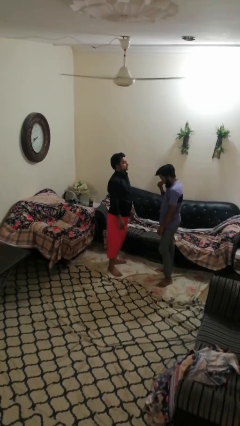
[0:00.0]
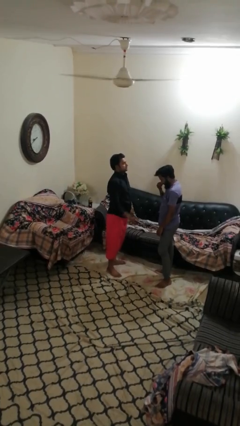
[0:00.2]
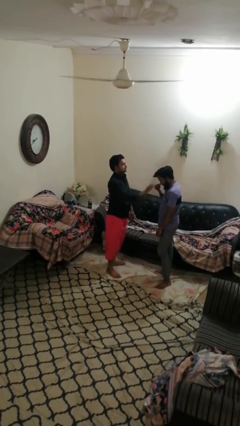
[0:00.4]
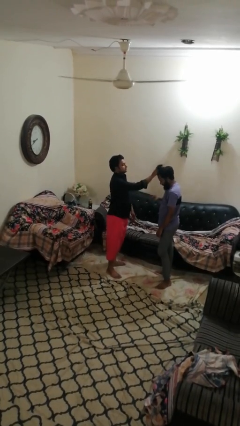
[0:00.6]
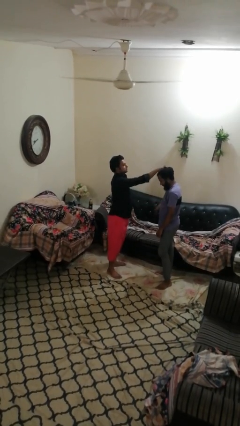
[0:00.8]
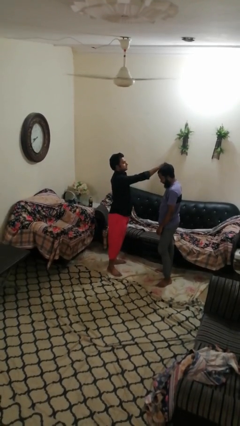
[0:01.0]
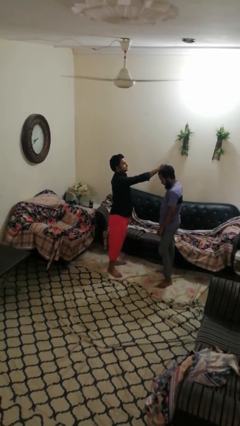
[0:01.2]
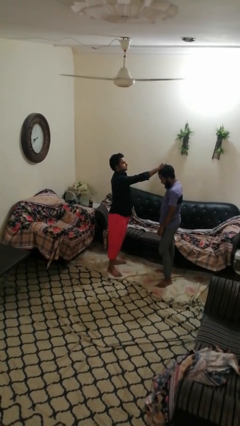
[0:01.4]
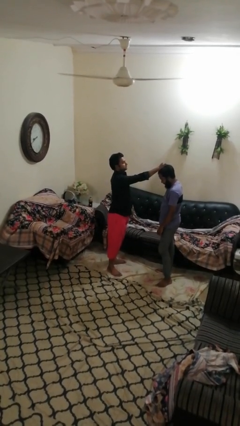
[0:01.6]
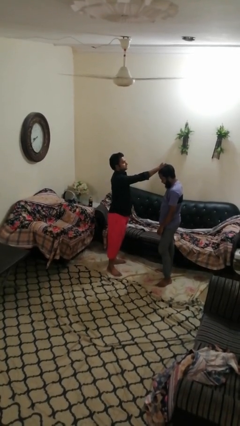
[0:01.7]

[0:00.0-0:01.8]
person grabs person by hair

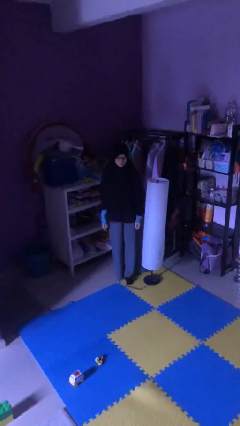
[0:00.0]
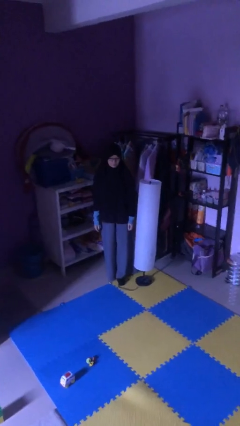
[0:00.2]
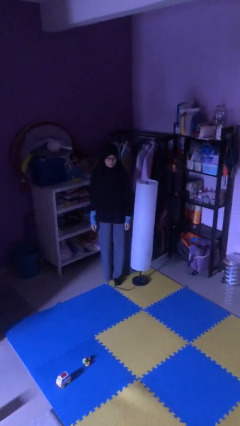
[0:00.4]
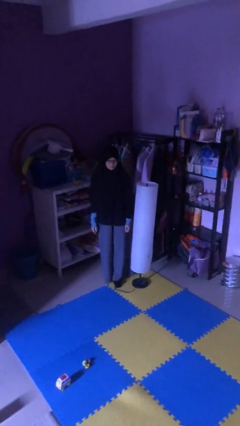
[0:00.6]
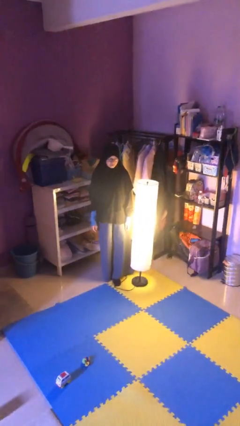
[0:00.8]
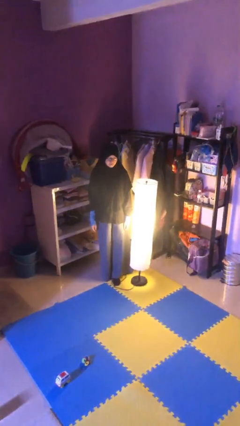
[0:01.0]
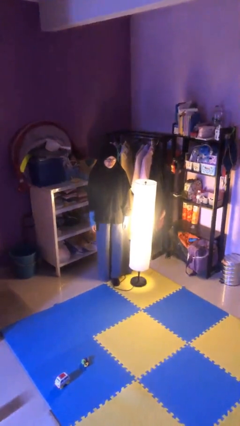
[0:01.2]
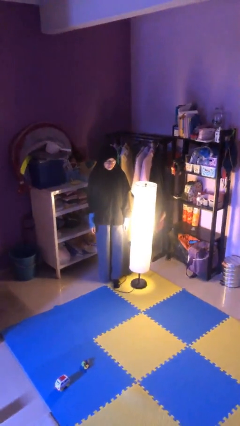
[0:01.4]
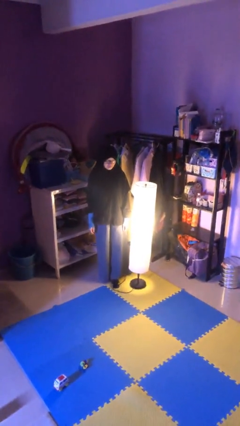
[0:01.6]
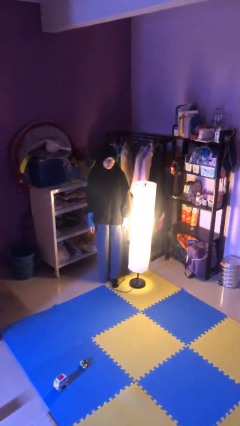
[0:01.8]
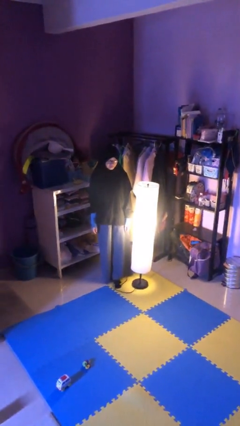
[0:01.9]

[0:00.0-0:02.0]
person turns on lamp

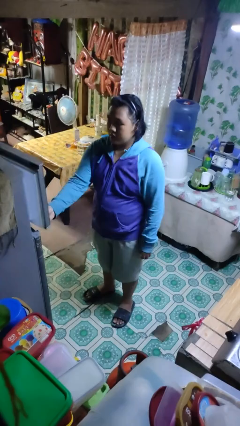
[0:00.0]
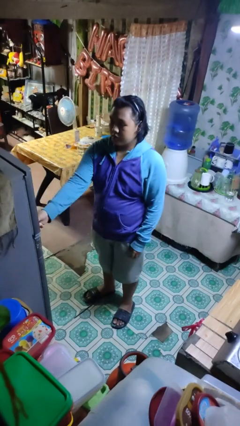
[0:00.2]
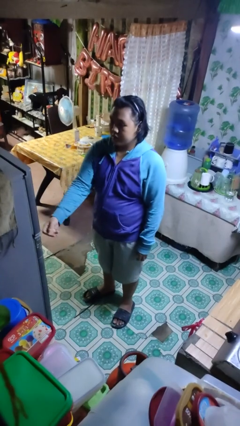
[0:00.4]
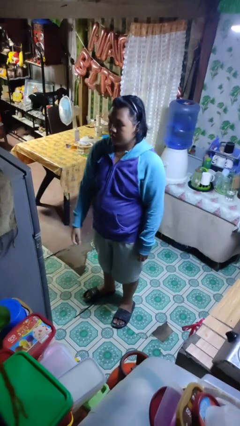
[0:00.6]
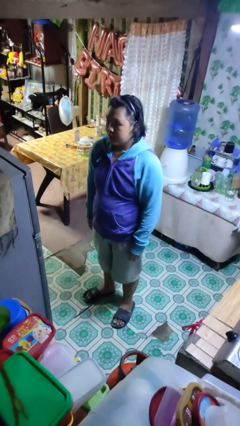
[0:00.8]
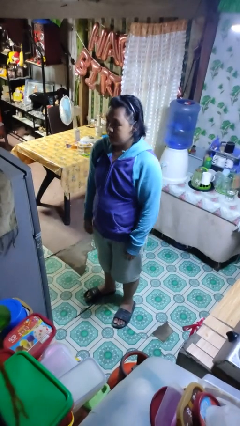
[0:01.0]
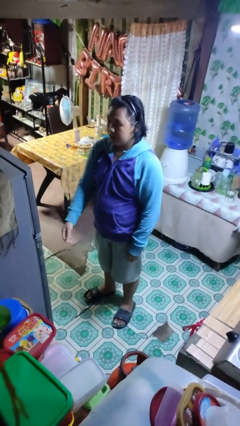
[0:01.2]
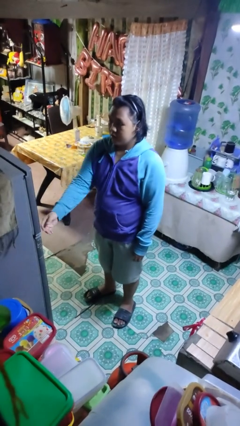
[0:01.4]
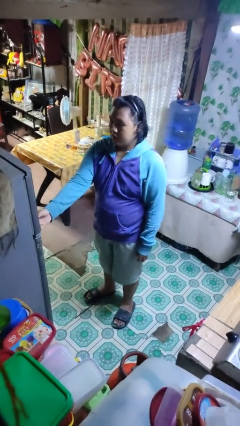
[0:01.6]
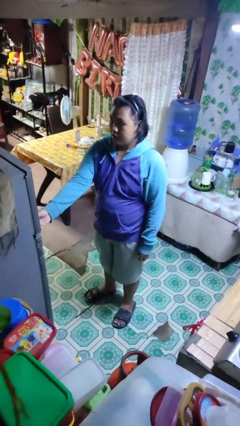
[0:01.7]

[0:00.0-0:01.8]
person closes refrigerator

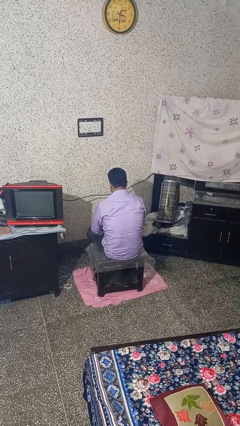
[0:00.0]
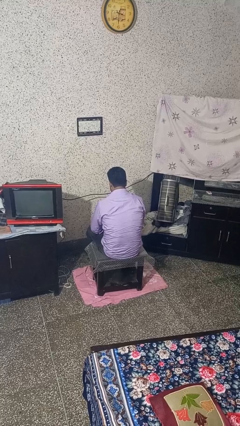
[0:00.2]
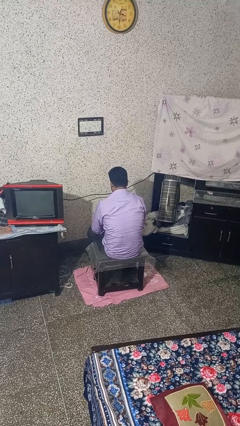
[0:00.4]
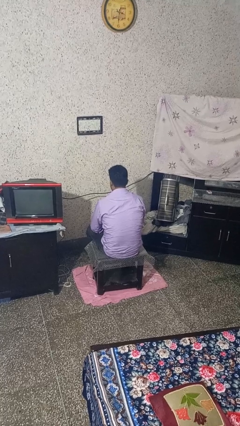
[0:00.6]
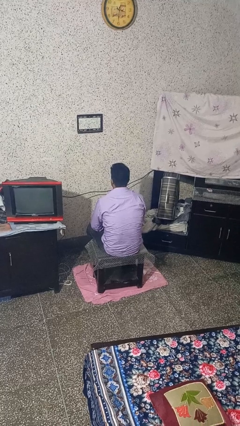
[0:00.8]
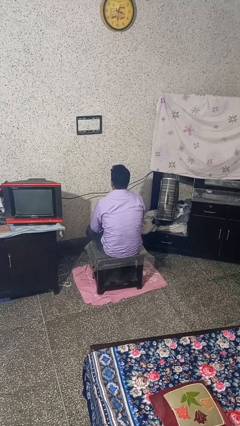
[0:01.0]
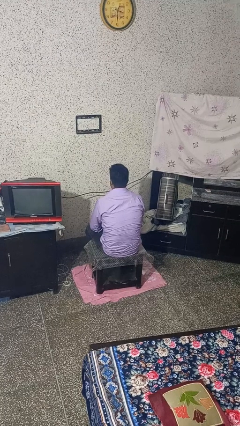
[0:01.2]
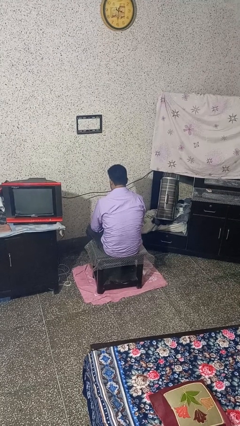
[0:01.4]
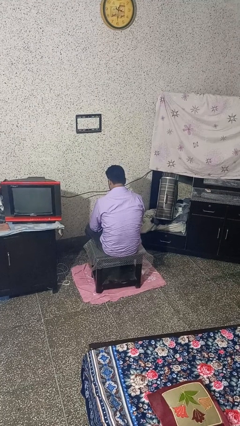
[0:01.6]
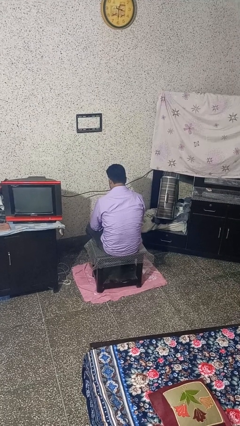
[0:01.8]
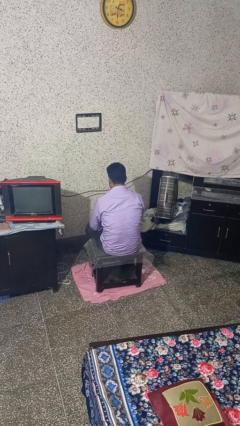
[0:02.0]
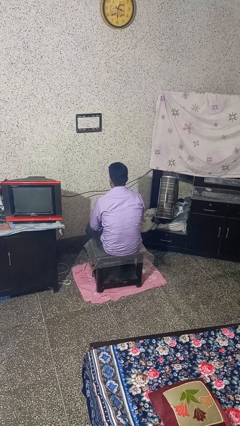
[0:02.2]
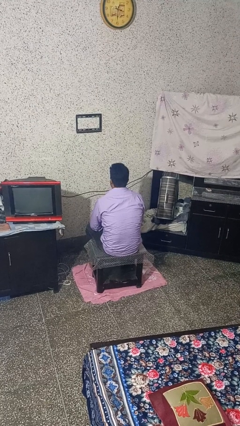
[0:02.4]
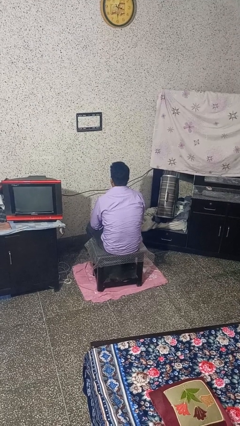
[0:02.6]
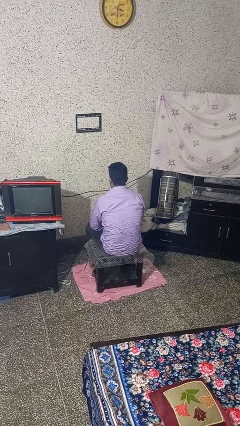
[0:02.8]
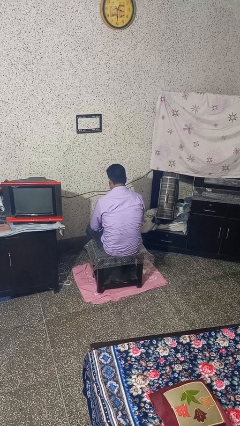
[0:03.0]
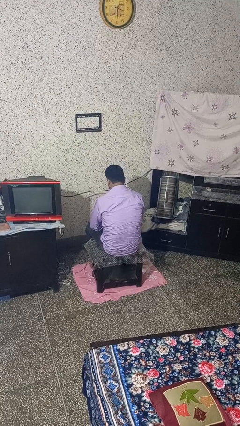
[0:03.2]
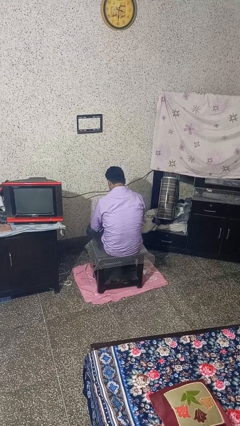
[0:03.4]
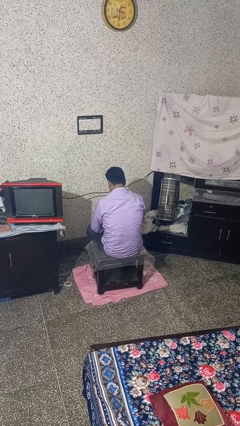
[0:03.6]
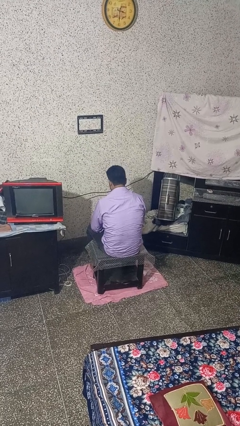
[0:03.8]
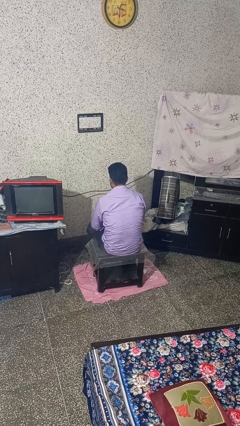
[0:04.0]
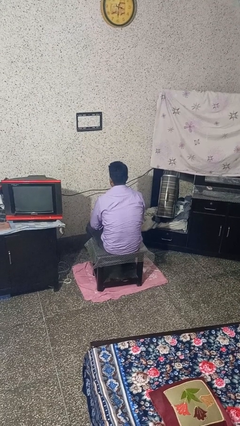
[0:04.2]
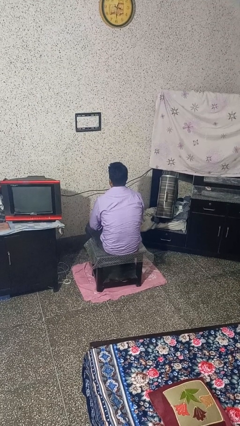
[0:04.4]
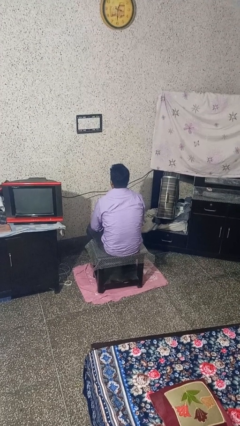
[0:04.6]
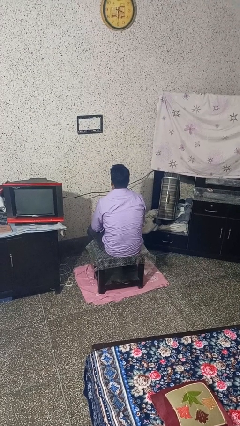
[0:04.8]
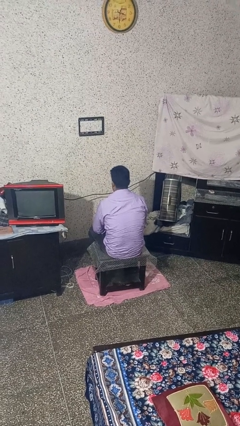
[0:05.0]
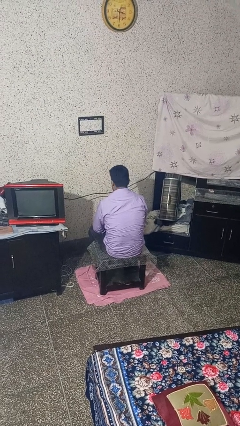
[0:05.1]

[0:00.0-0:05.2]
person nods head

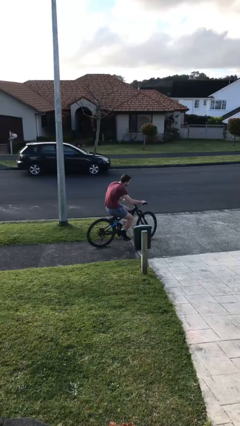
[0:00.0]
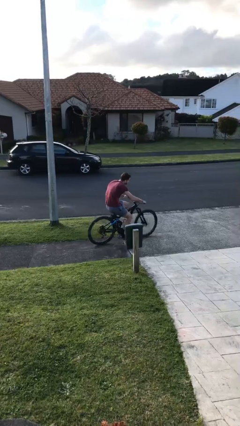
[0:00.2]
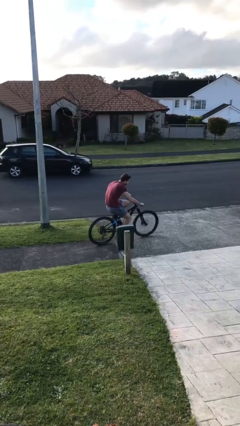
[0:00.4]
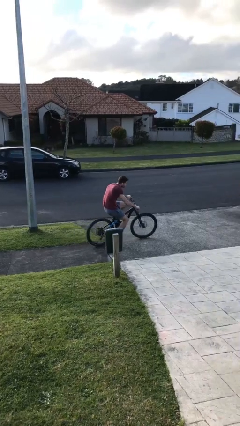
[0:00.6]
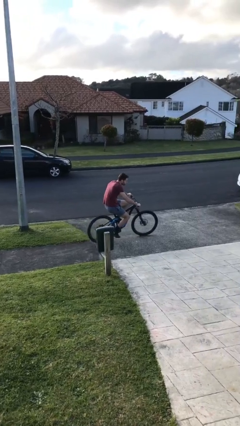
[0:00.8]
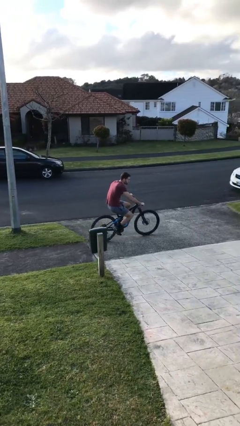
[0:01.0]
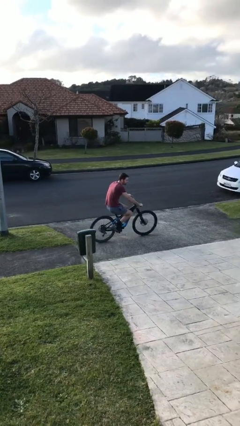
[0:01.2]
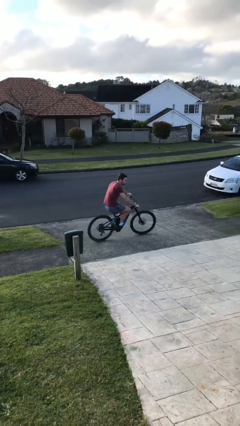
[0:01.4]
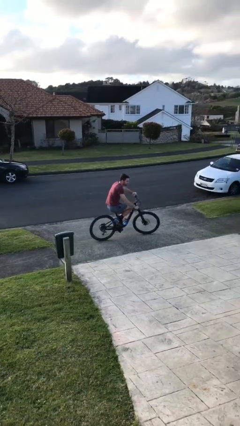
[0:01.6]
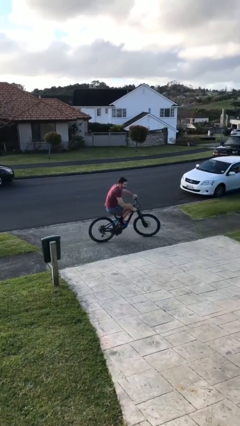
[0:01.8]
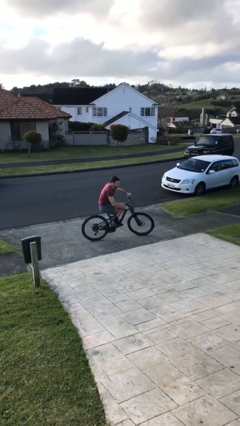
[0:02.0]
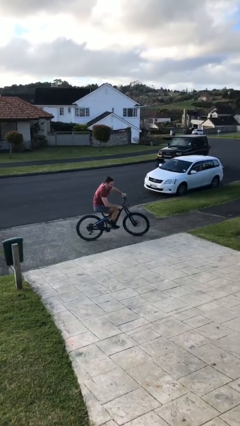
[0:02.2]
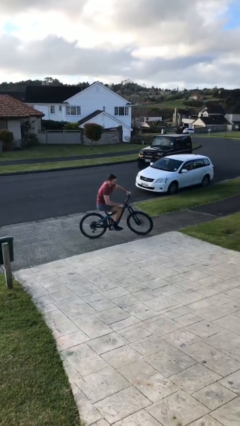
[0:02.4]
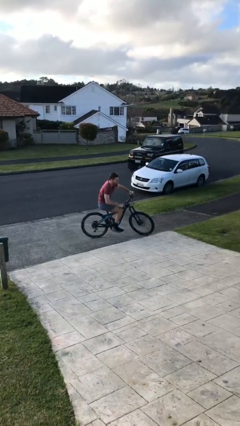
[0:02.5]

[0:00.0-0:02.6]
person rides bicycle

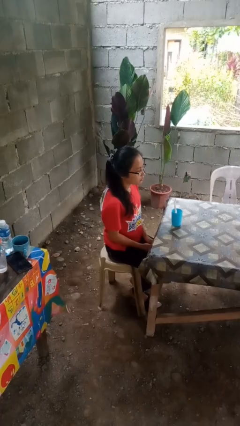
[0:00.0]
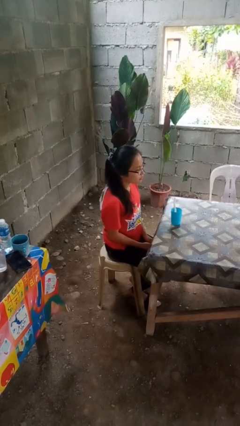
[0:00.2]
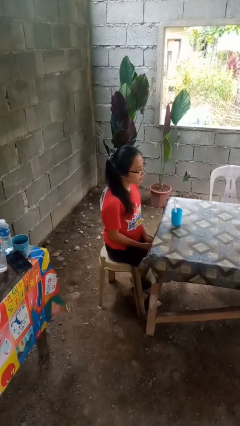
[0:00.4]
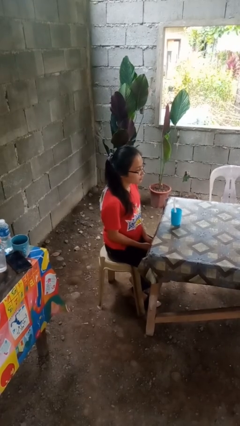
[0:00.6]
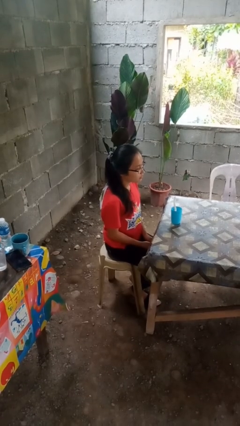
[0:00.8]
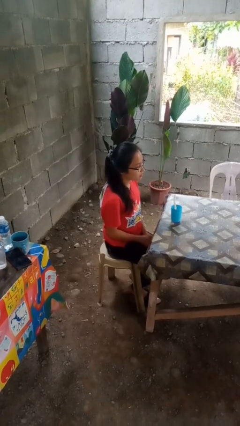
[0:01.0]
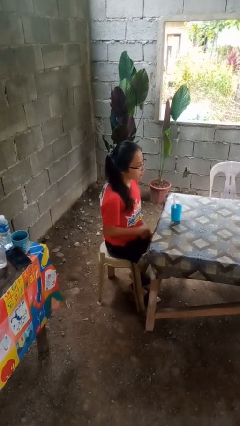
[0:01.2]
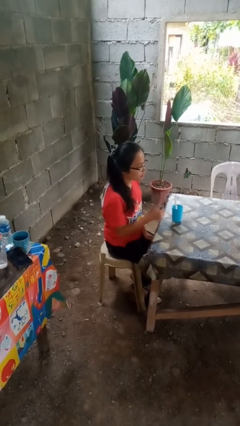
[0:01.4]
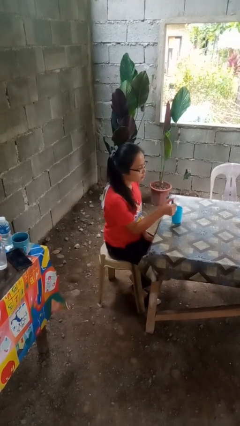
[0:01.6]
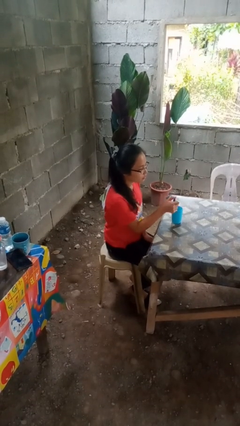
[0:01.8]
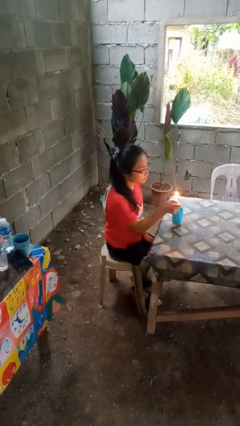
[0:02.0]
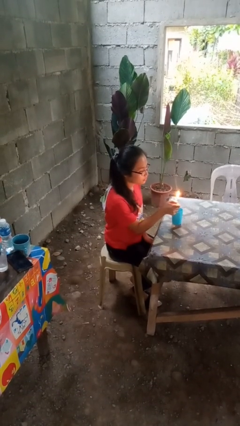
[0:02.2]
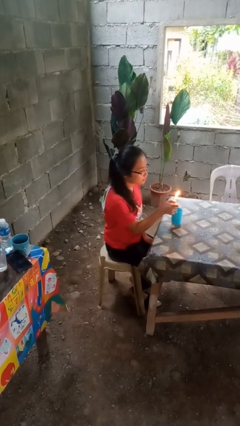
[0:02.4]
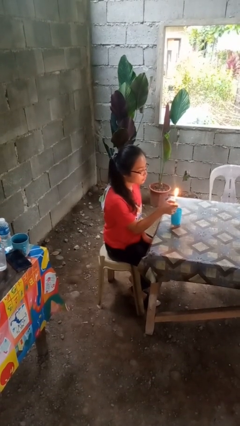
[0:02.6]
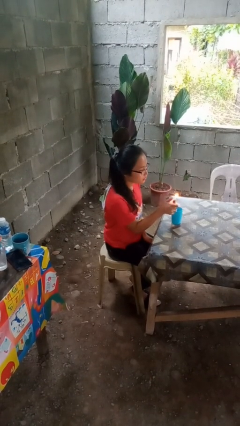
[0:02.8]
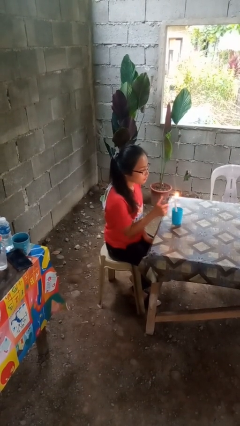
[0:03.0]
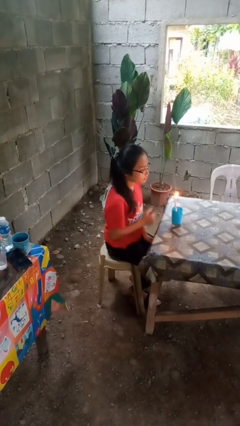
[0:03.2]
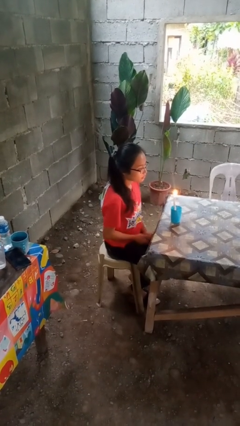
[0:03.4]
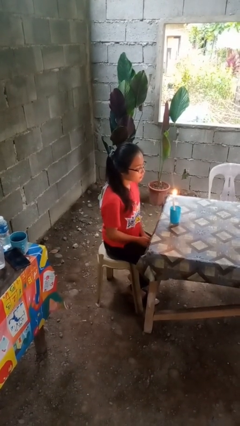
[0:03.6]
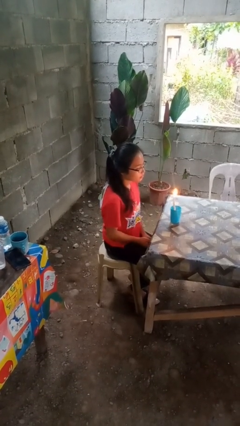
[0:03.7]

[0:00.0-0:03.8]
person lights candle
